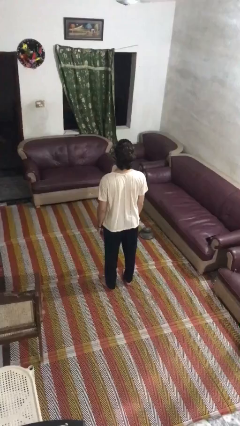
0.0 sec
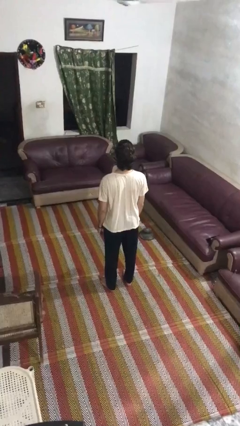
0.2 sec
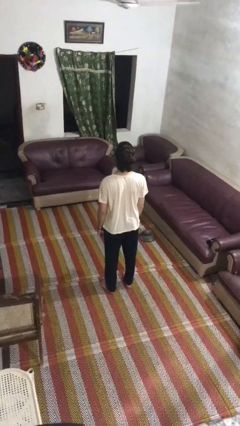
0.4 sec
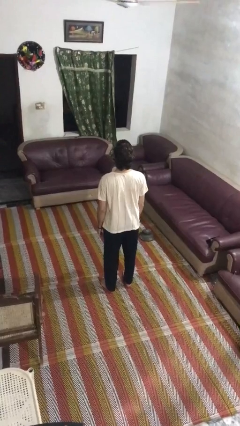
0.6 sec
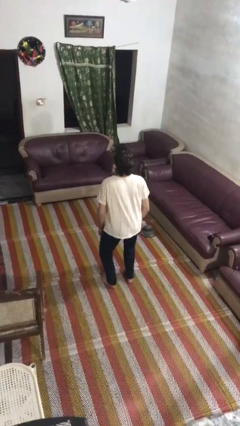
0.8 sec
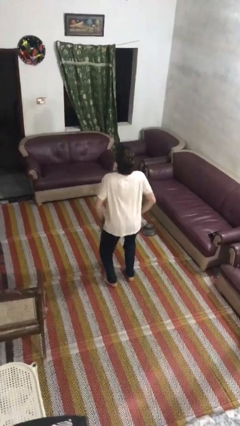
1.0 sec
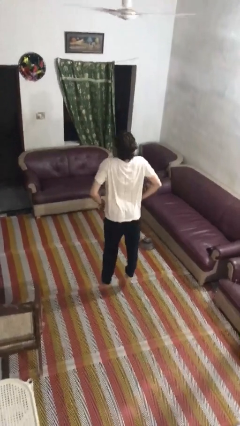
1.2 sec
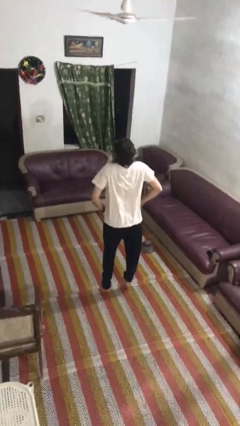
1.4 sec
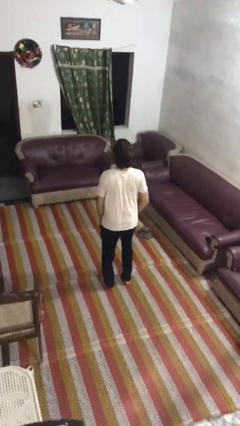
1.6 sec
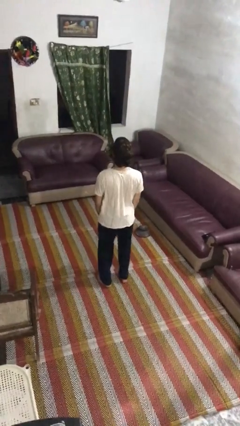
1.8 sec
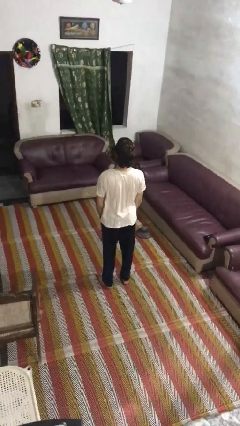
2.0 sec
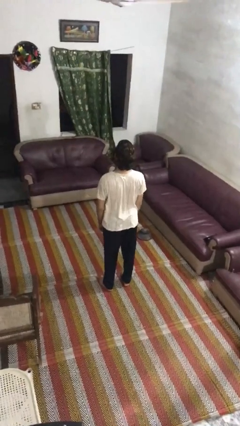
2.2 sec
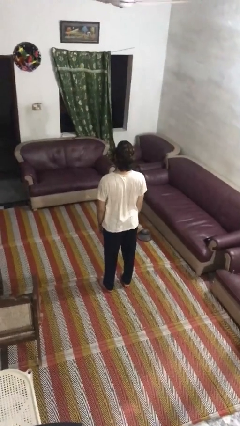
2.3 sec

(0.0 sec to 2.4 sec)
person jumps

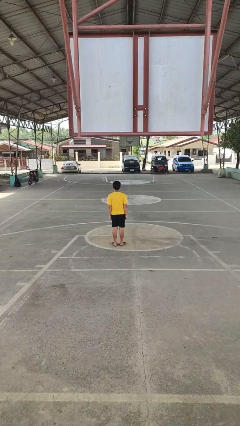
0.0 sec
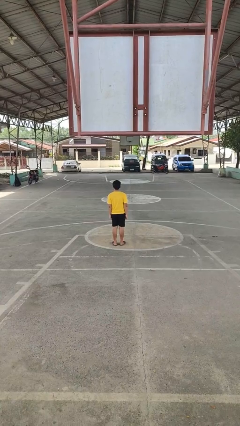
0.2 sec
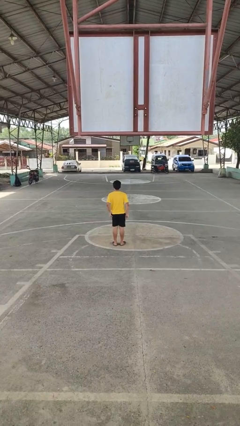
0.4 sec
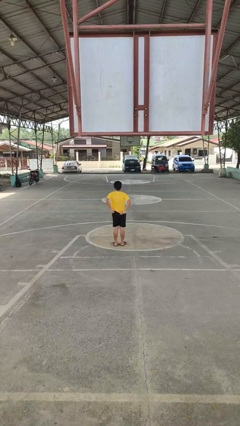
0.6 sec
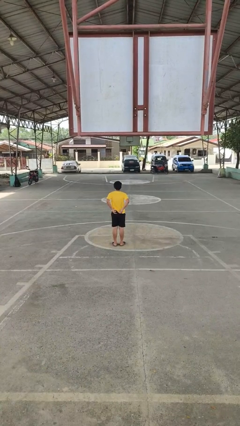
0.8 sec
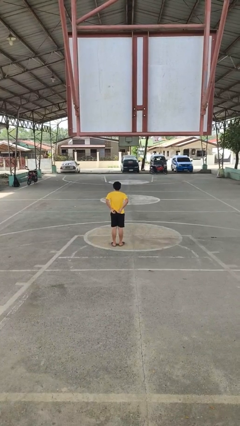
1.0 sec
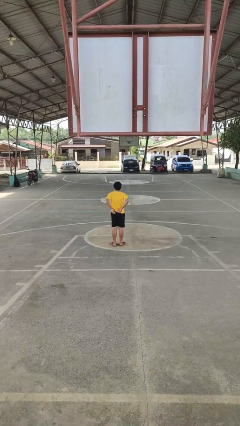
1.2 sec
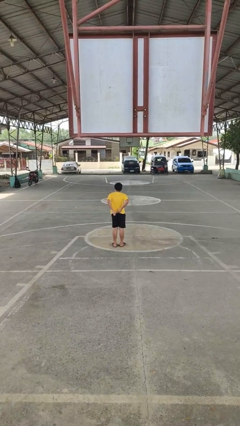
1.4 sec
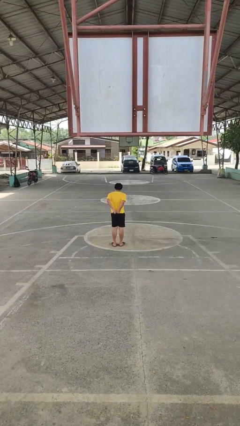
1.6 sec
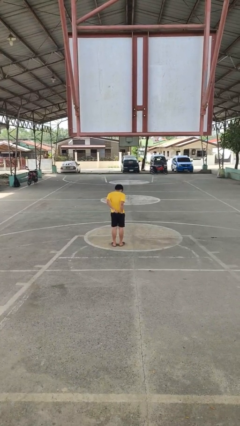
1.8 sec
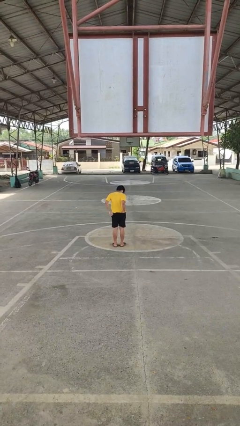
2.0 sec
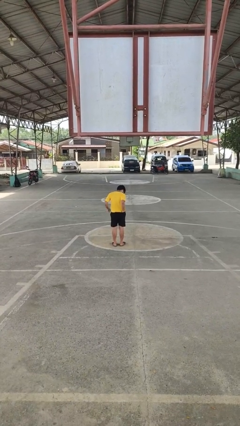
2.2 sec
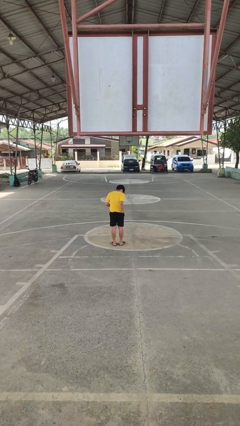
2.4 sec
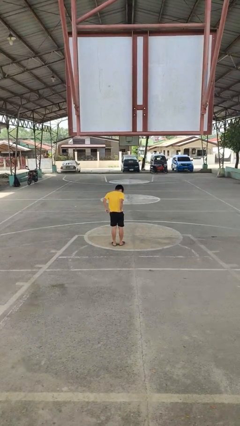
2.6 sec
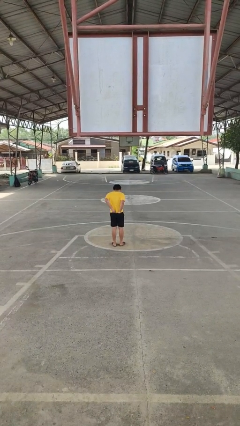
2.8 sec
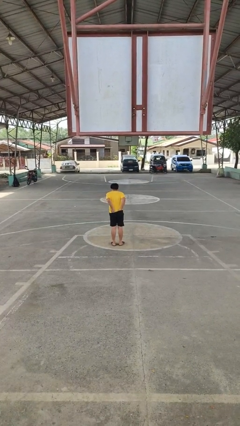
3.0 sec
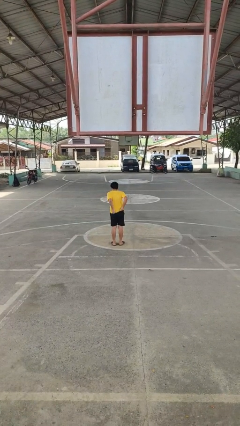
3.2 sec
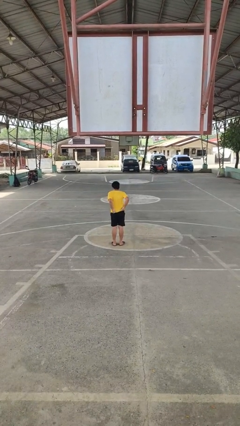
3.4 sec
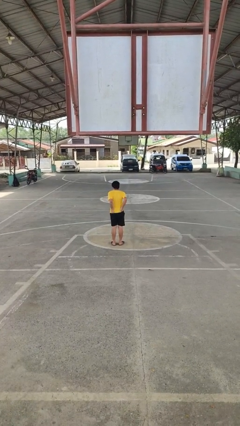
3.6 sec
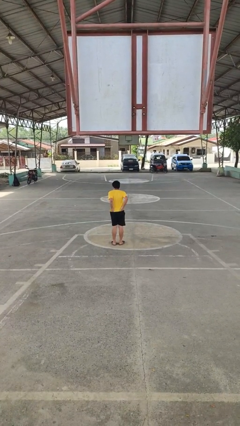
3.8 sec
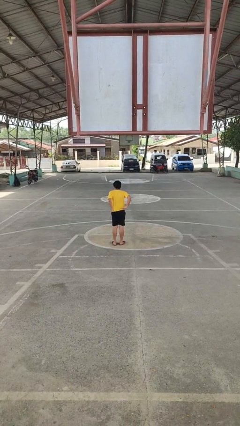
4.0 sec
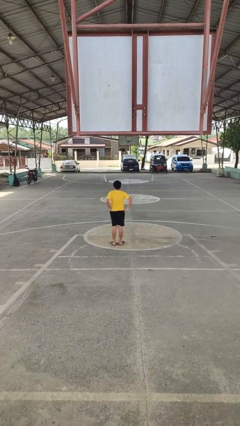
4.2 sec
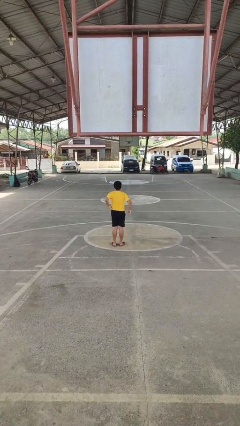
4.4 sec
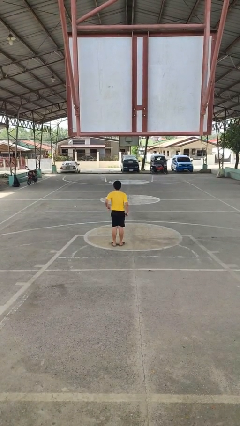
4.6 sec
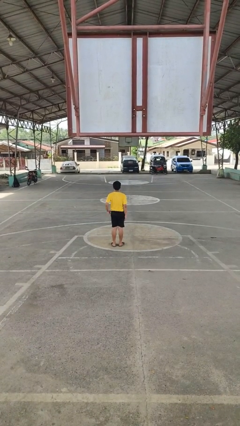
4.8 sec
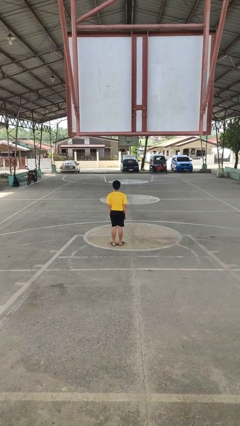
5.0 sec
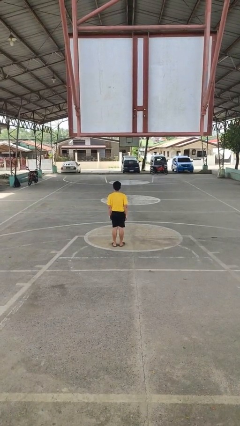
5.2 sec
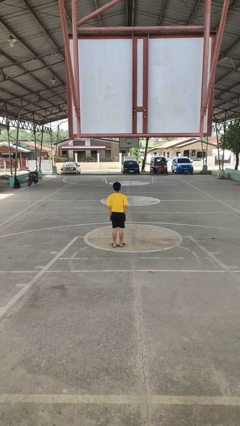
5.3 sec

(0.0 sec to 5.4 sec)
person tucks in shirt

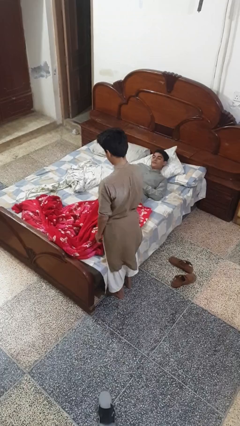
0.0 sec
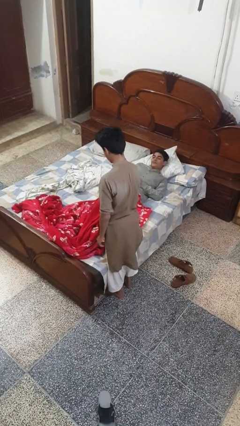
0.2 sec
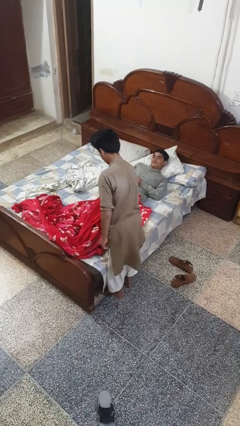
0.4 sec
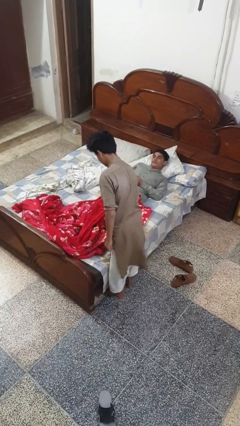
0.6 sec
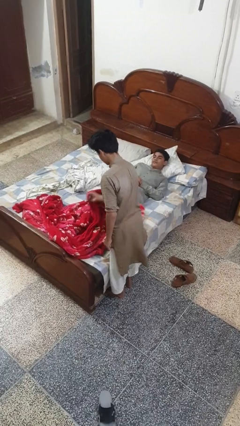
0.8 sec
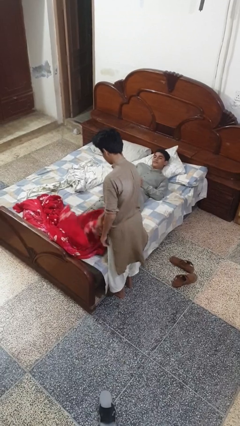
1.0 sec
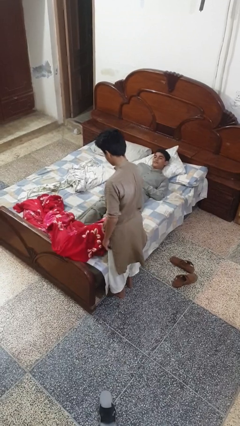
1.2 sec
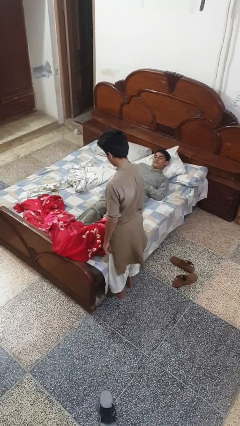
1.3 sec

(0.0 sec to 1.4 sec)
person uncovers friend with blanket

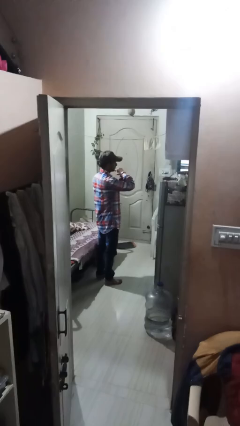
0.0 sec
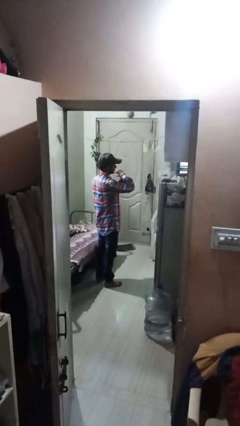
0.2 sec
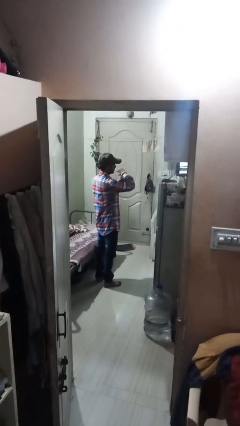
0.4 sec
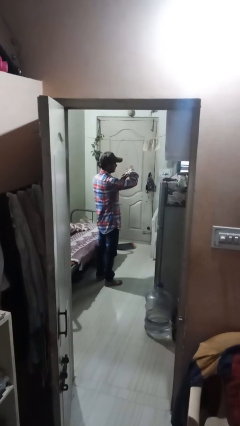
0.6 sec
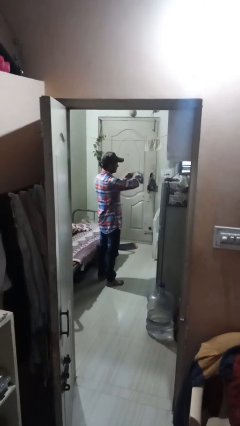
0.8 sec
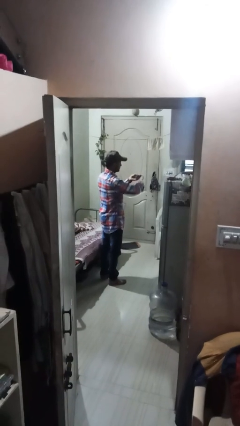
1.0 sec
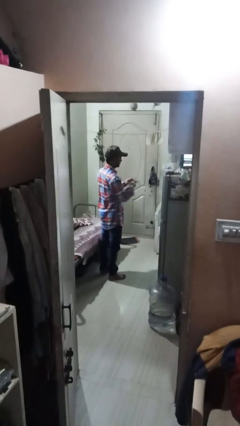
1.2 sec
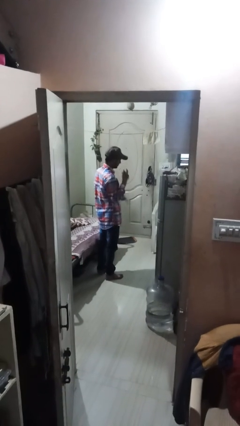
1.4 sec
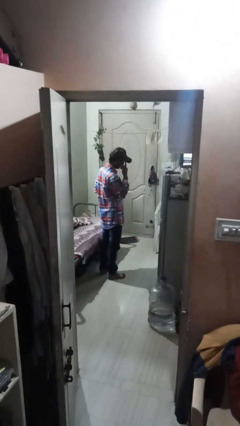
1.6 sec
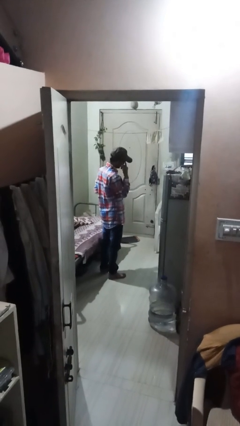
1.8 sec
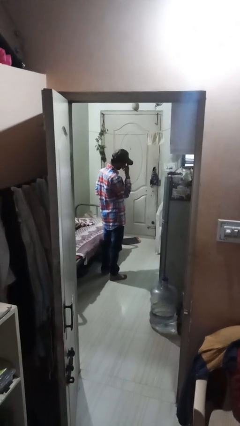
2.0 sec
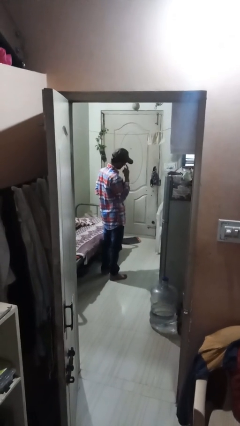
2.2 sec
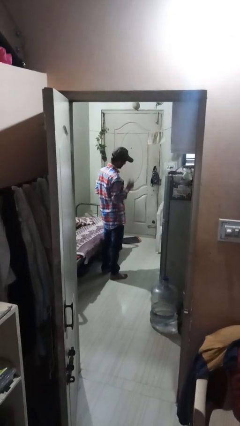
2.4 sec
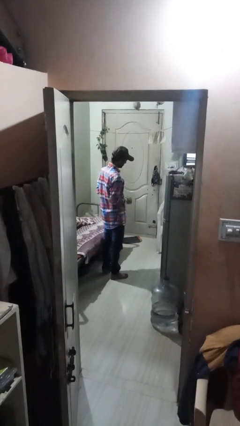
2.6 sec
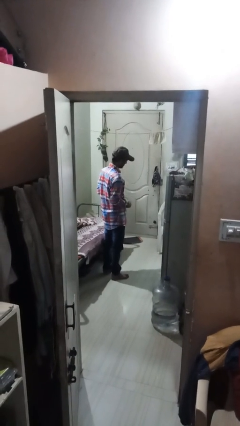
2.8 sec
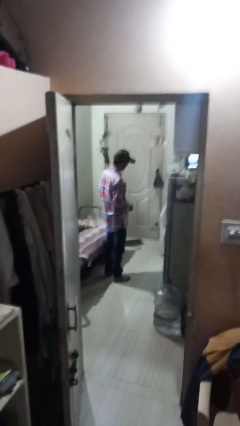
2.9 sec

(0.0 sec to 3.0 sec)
person takes off wristwatch

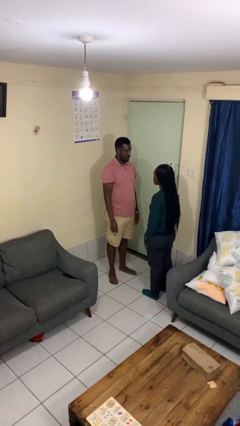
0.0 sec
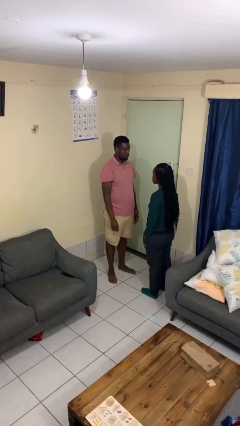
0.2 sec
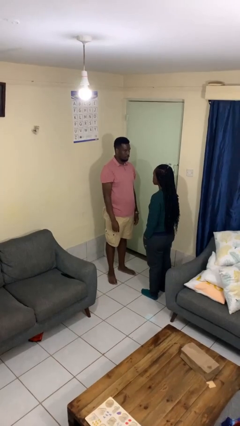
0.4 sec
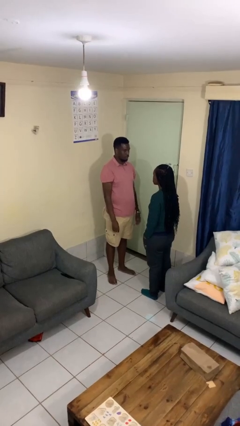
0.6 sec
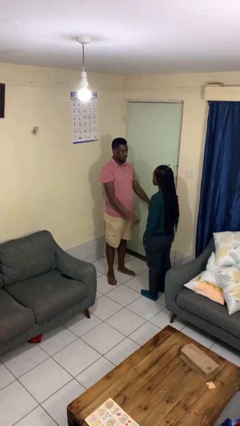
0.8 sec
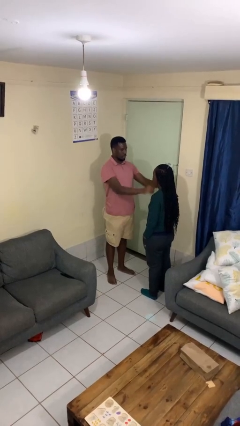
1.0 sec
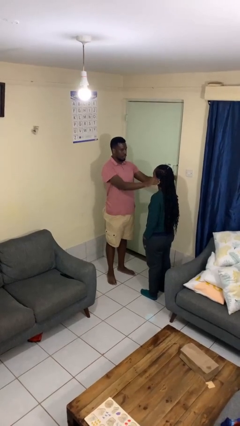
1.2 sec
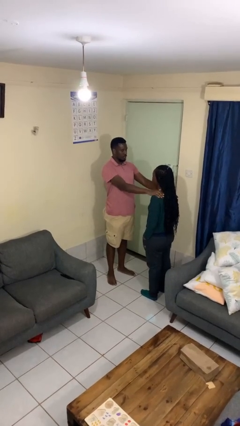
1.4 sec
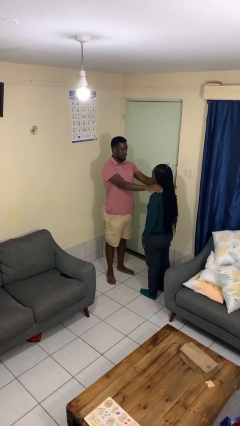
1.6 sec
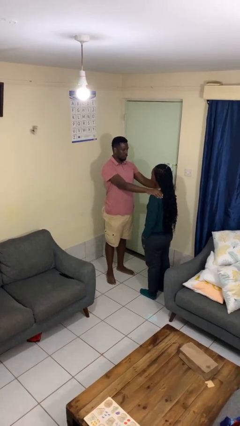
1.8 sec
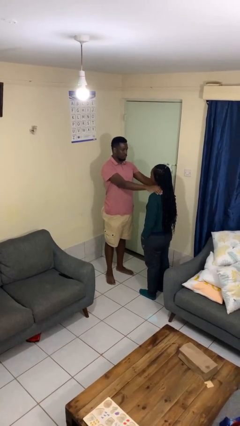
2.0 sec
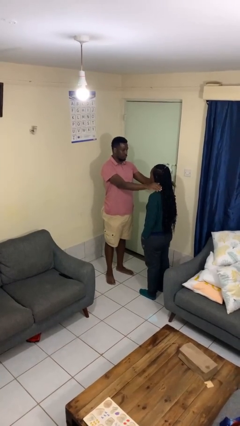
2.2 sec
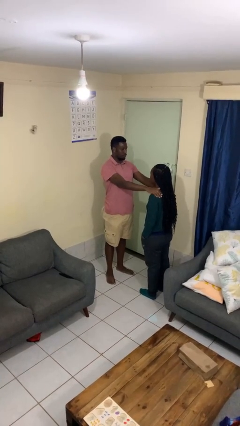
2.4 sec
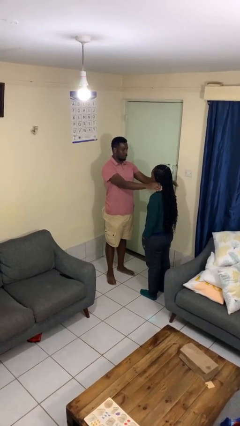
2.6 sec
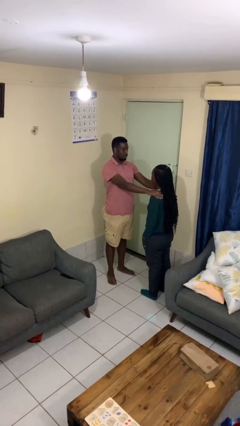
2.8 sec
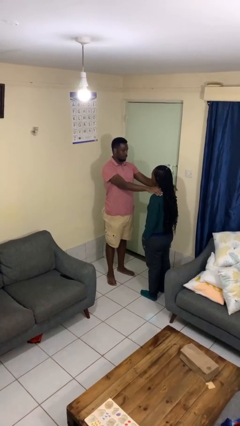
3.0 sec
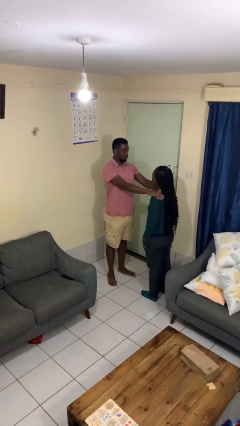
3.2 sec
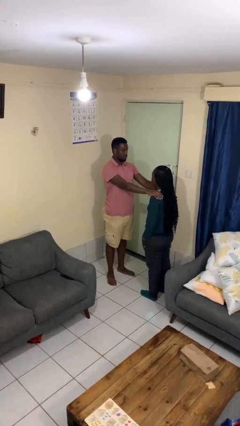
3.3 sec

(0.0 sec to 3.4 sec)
person pounds shoulders of person

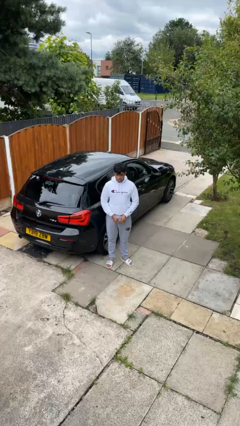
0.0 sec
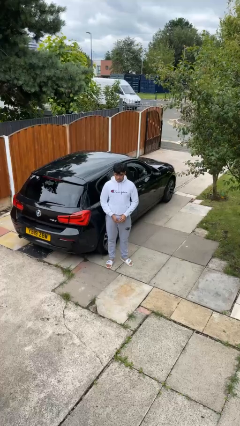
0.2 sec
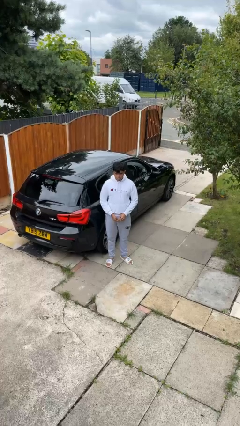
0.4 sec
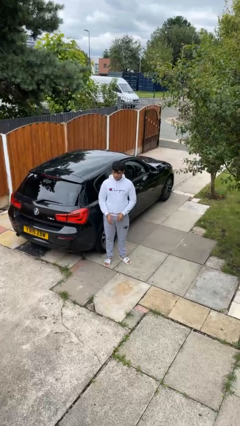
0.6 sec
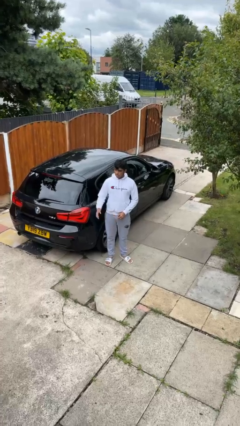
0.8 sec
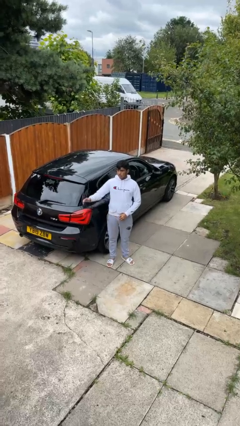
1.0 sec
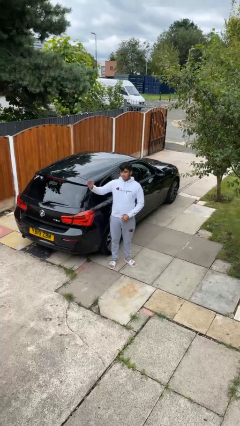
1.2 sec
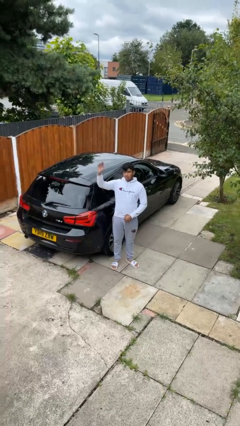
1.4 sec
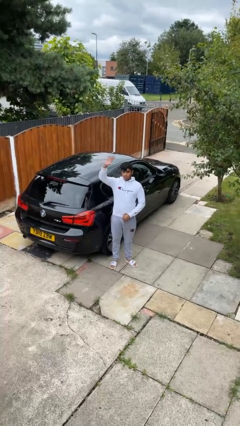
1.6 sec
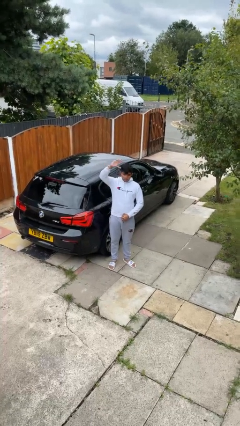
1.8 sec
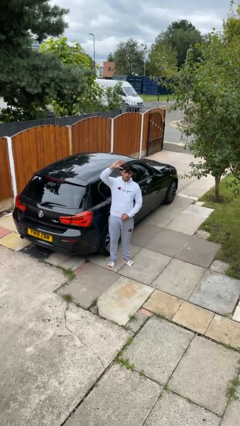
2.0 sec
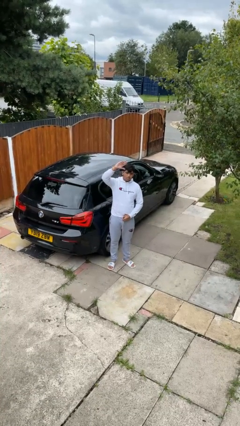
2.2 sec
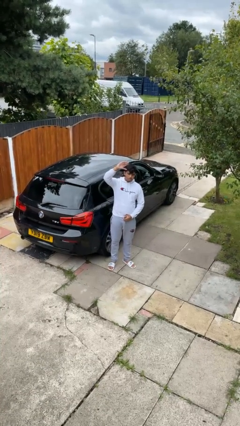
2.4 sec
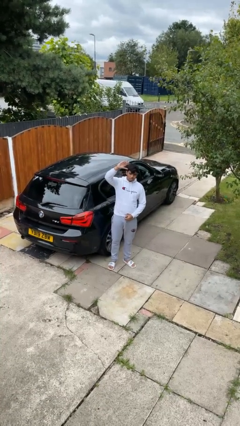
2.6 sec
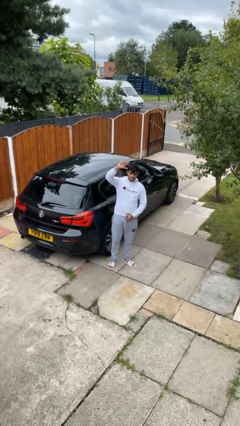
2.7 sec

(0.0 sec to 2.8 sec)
person gestures raise hand
